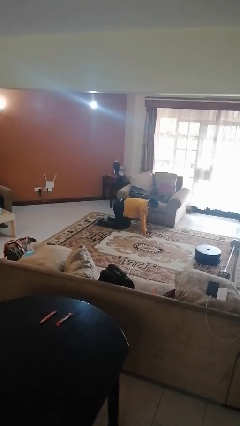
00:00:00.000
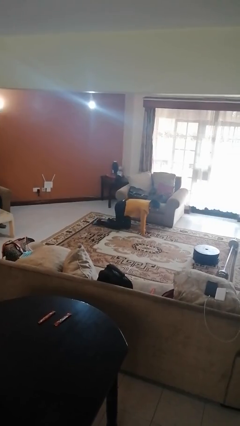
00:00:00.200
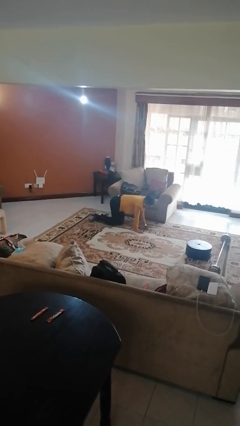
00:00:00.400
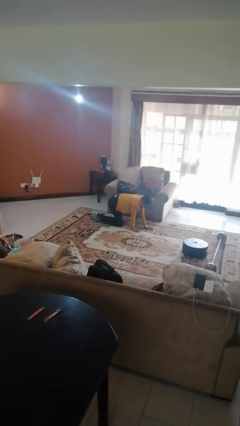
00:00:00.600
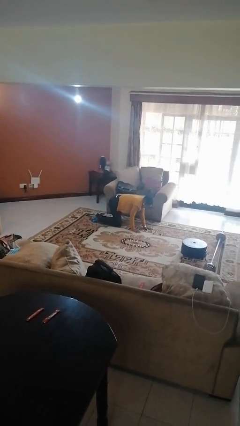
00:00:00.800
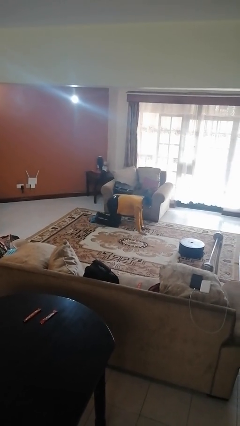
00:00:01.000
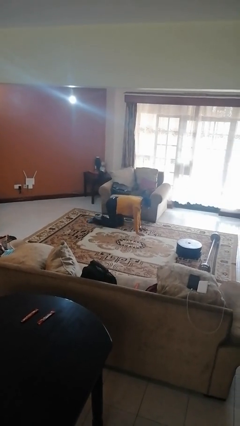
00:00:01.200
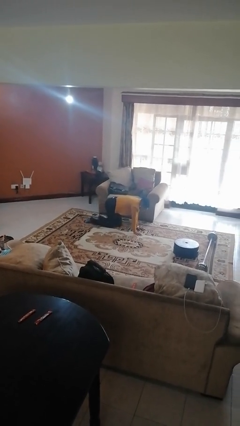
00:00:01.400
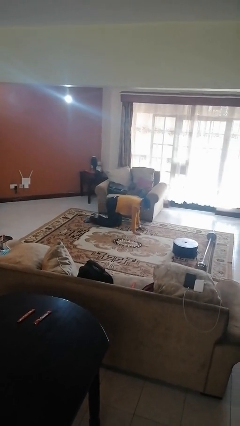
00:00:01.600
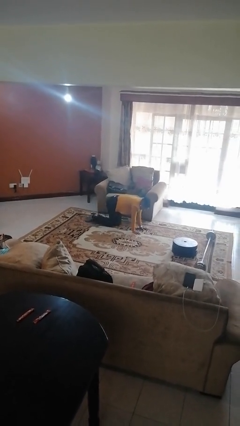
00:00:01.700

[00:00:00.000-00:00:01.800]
person crawls

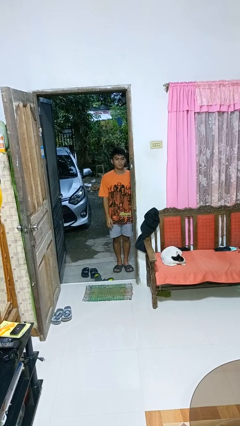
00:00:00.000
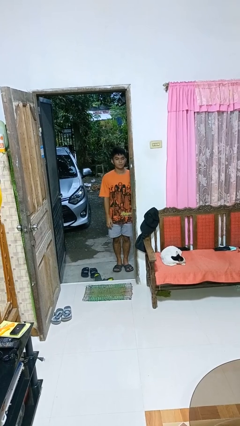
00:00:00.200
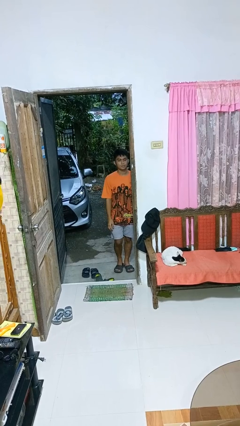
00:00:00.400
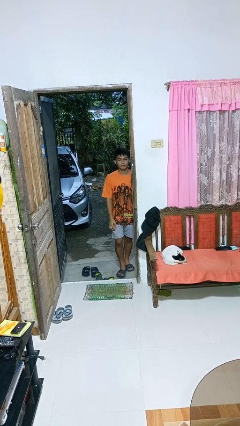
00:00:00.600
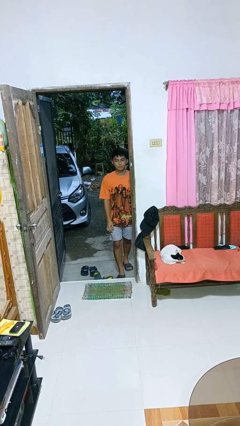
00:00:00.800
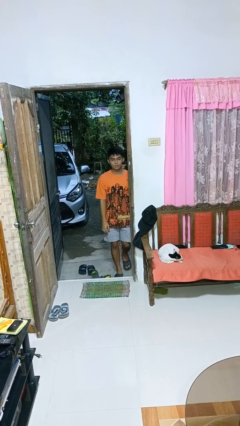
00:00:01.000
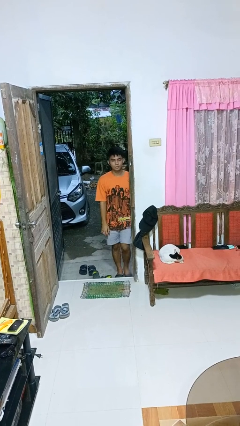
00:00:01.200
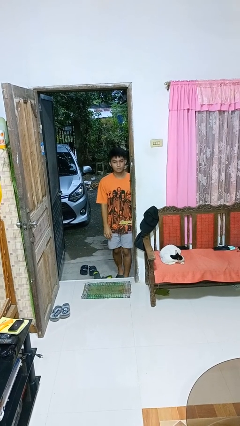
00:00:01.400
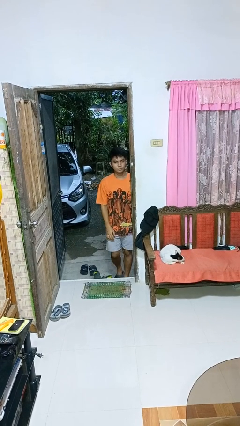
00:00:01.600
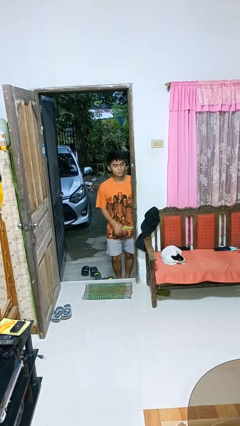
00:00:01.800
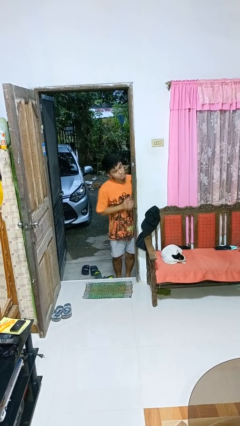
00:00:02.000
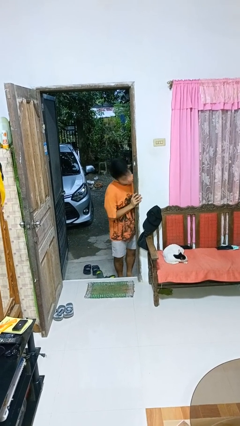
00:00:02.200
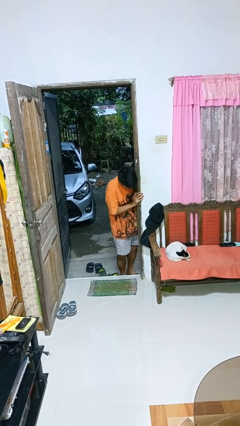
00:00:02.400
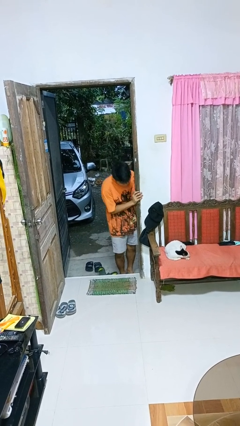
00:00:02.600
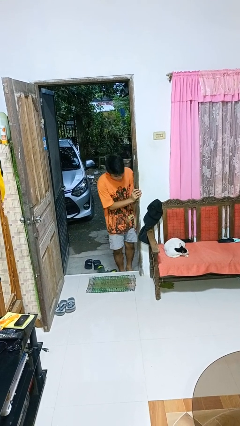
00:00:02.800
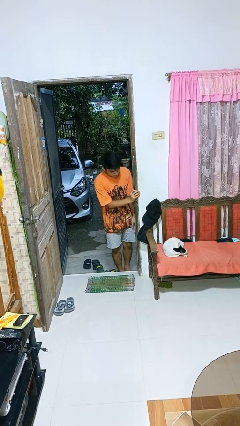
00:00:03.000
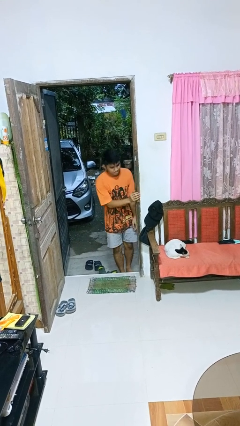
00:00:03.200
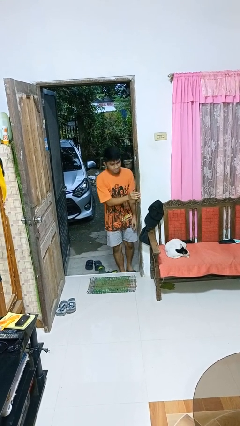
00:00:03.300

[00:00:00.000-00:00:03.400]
person bumps into wall

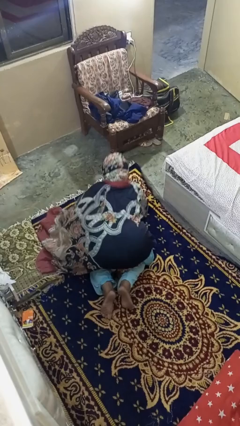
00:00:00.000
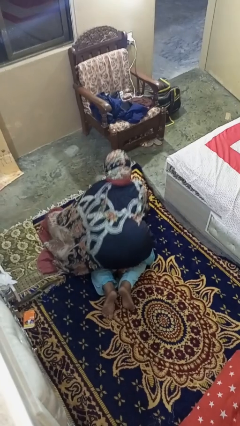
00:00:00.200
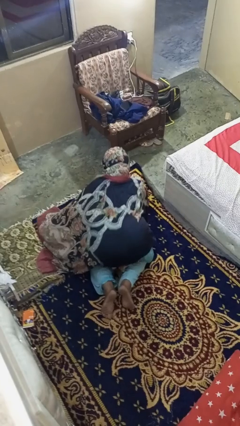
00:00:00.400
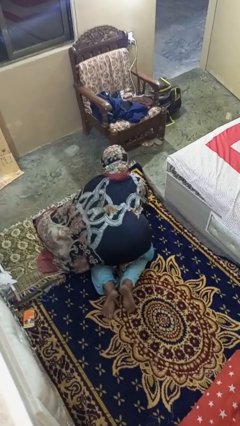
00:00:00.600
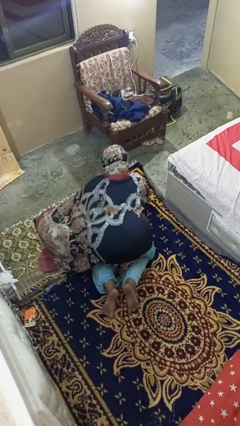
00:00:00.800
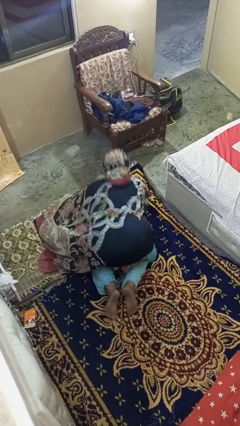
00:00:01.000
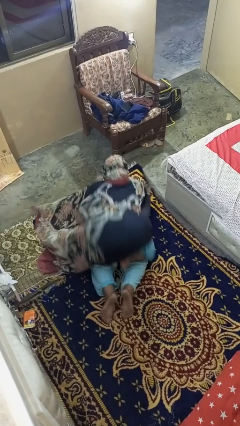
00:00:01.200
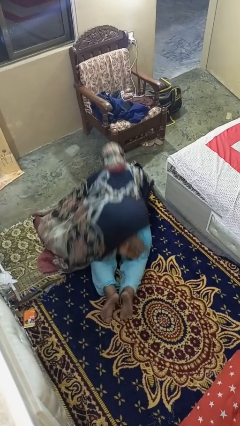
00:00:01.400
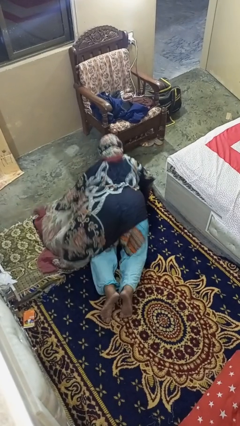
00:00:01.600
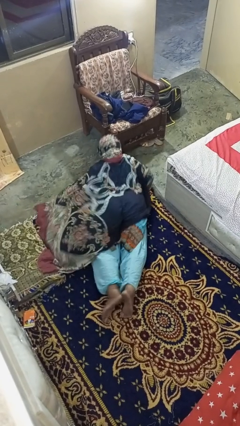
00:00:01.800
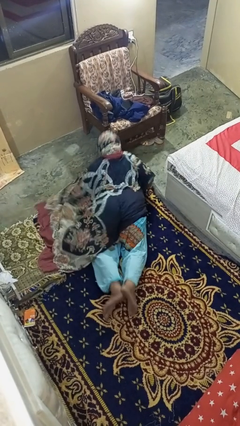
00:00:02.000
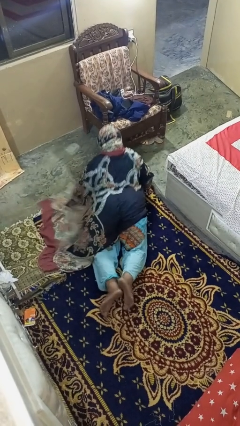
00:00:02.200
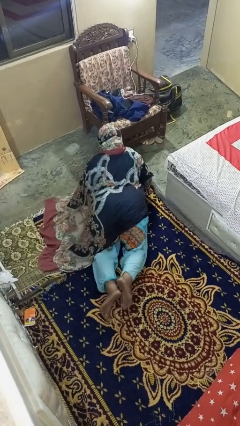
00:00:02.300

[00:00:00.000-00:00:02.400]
person exercises with pushup

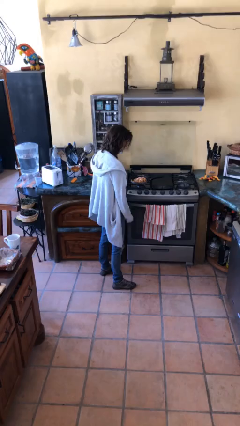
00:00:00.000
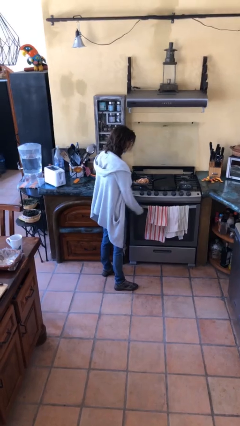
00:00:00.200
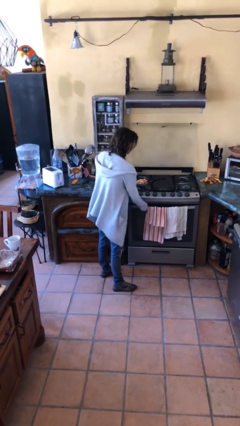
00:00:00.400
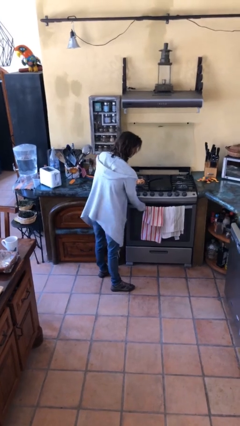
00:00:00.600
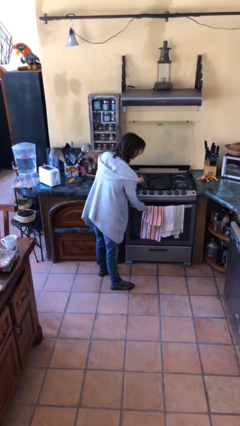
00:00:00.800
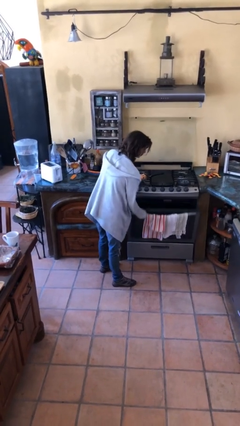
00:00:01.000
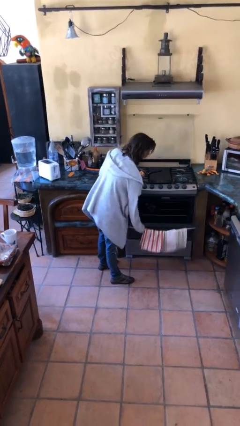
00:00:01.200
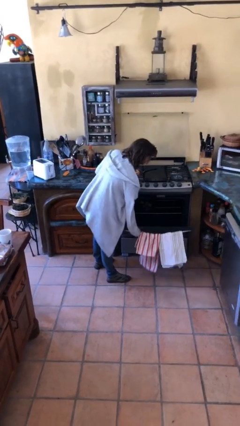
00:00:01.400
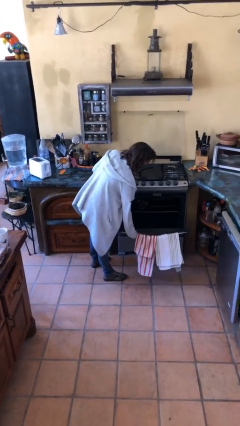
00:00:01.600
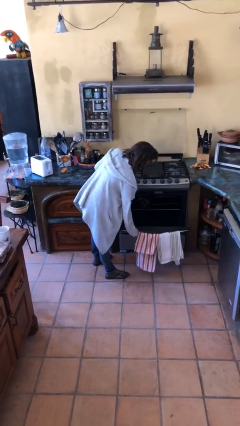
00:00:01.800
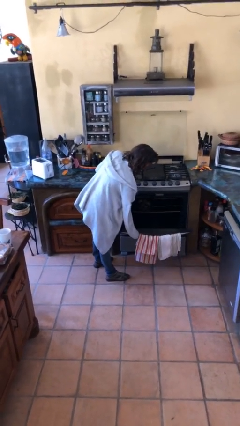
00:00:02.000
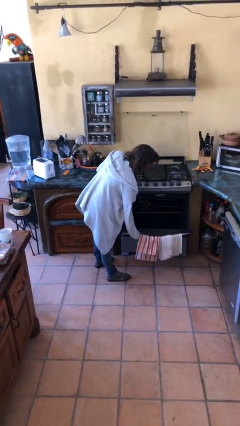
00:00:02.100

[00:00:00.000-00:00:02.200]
person opens oven door

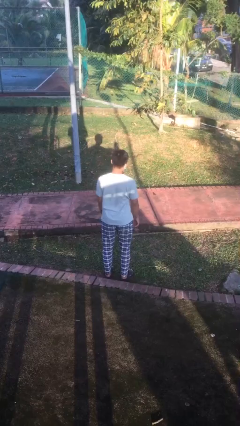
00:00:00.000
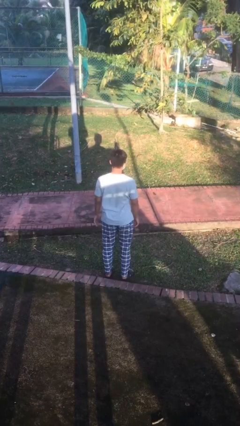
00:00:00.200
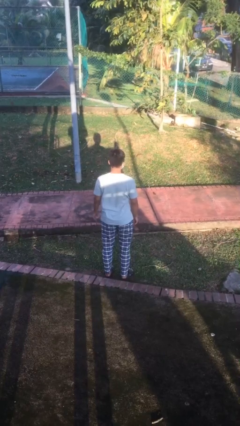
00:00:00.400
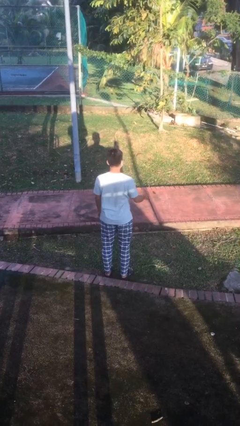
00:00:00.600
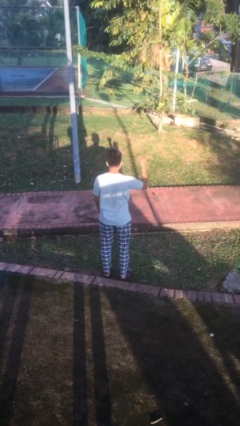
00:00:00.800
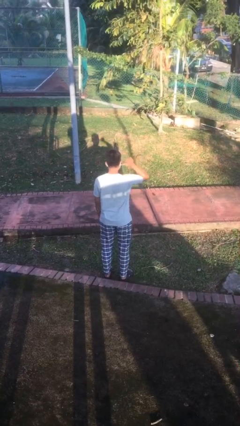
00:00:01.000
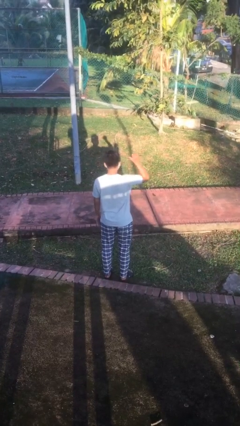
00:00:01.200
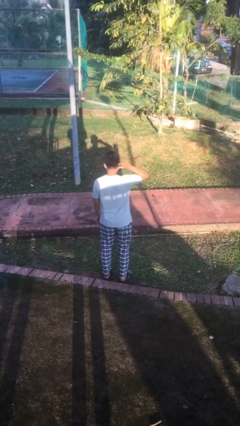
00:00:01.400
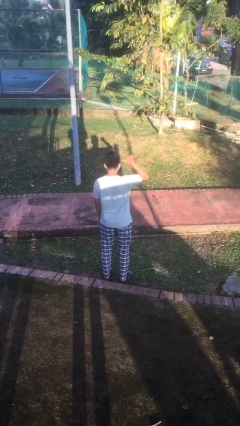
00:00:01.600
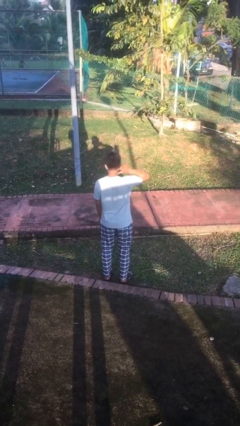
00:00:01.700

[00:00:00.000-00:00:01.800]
person gestures behind me

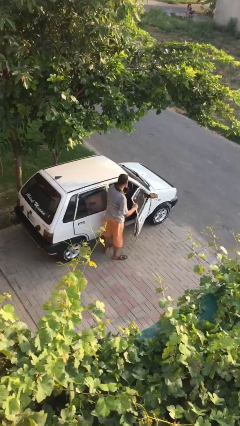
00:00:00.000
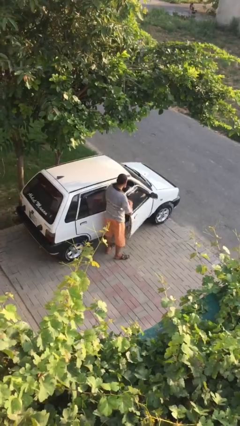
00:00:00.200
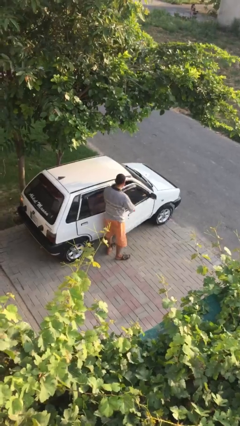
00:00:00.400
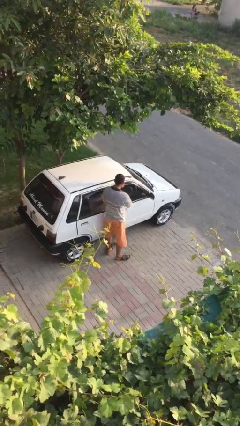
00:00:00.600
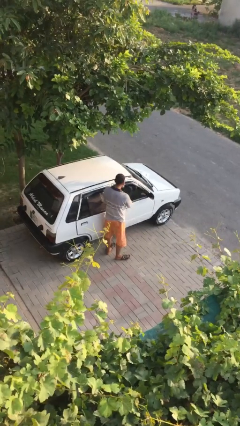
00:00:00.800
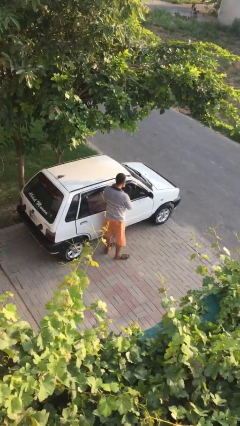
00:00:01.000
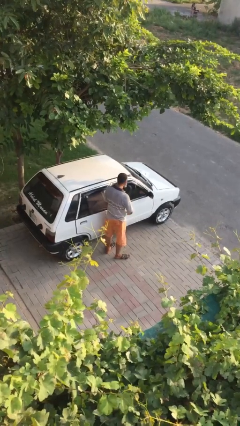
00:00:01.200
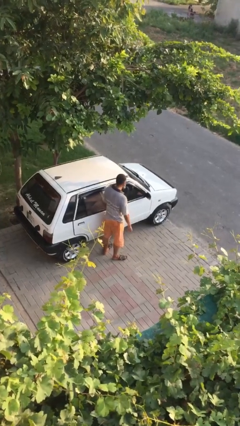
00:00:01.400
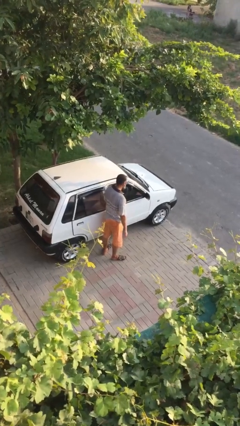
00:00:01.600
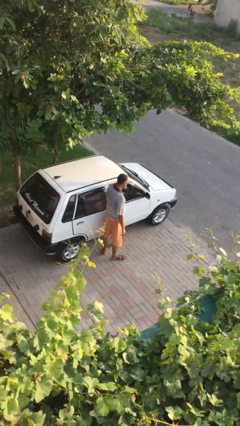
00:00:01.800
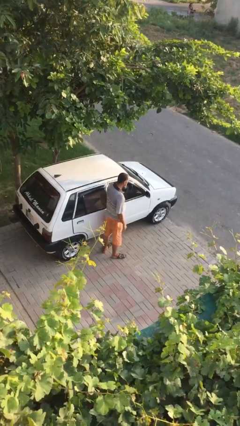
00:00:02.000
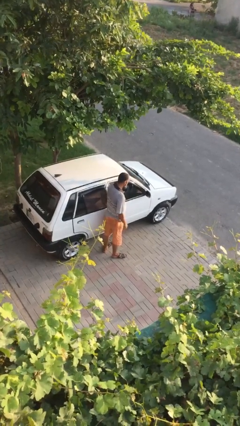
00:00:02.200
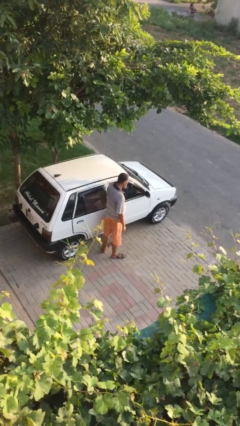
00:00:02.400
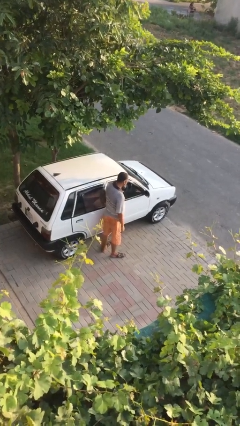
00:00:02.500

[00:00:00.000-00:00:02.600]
person closes car door

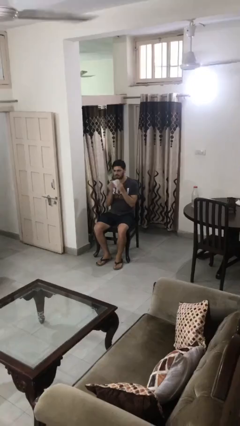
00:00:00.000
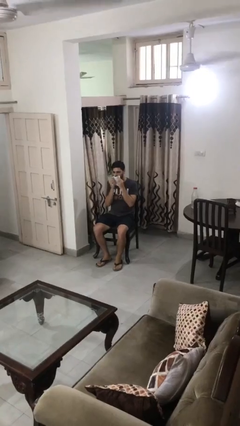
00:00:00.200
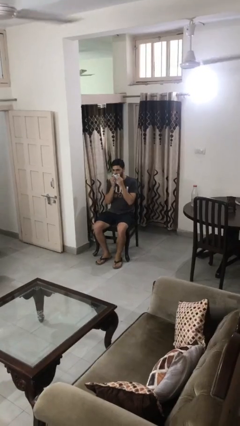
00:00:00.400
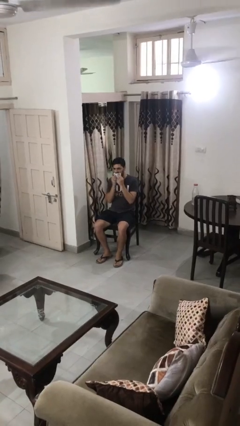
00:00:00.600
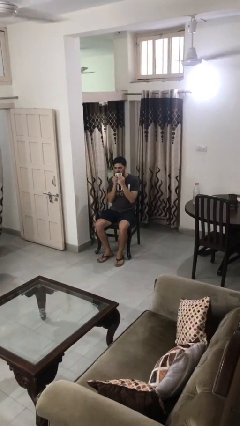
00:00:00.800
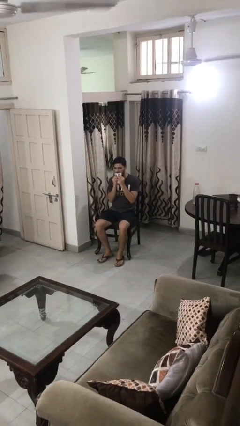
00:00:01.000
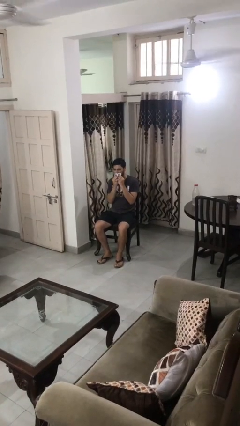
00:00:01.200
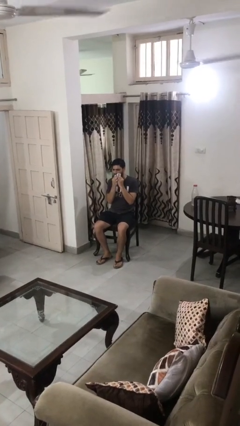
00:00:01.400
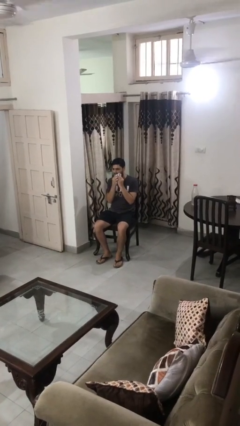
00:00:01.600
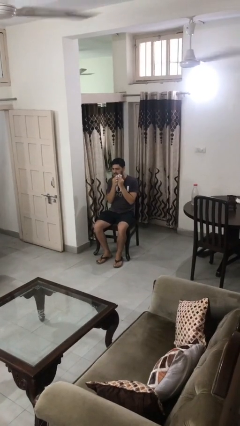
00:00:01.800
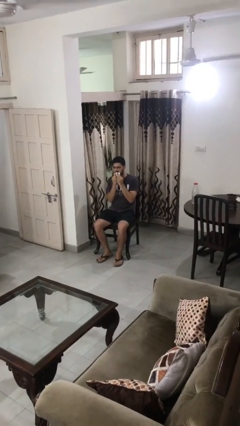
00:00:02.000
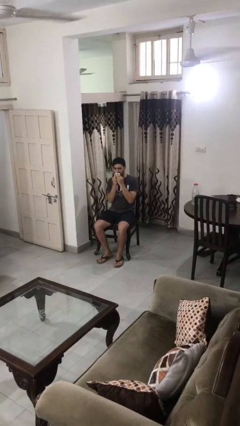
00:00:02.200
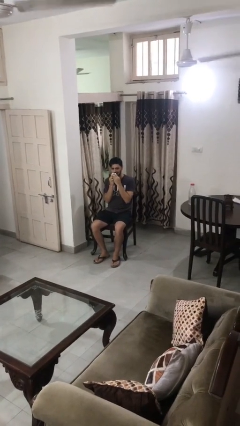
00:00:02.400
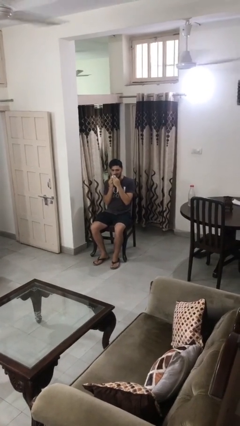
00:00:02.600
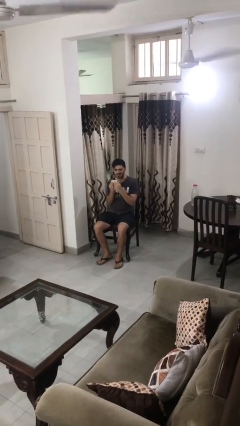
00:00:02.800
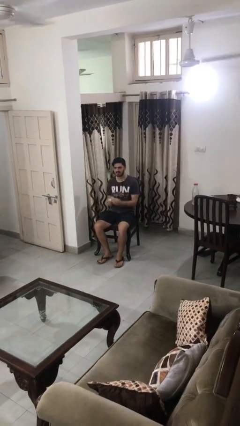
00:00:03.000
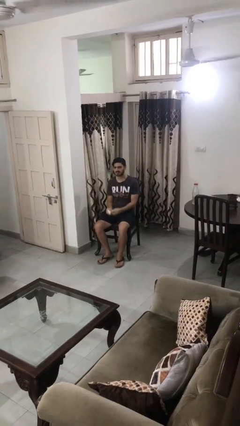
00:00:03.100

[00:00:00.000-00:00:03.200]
person wipes mouth with napkin
